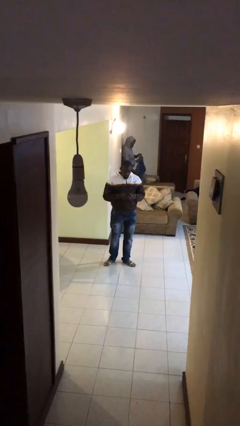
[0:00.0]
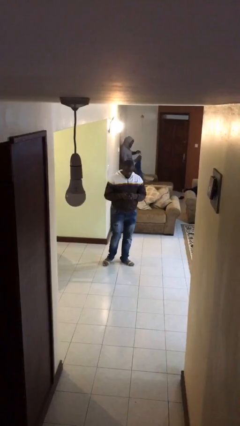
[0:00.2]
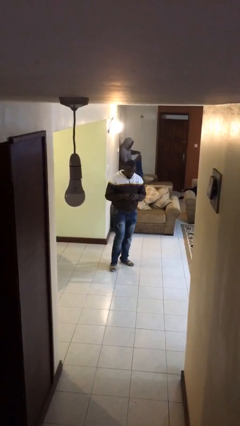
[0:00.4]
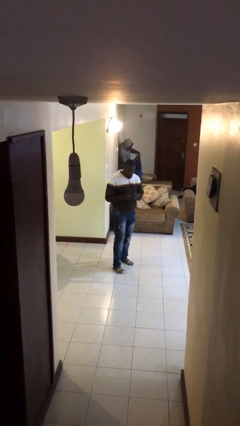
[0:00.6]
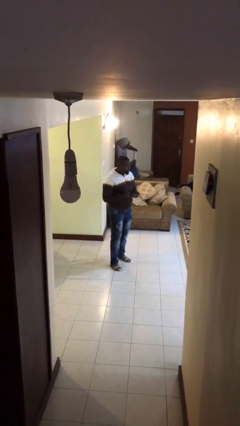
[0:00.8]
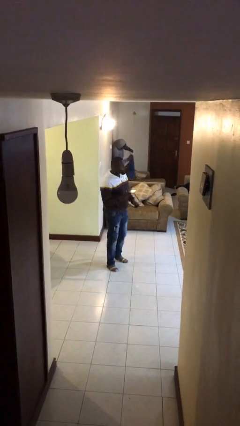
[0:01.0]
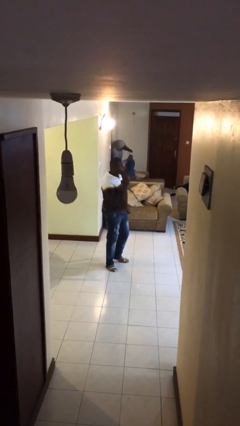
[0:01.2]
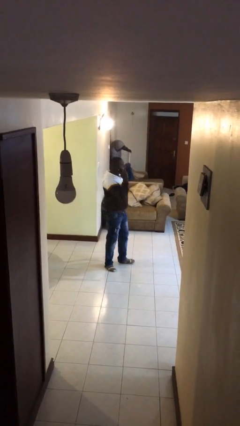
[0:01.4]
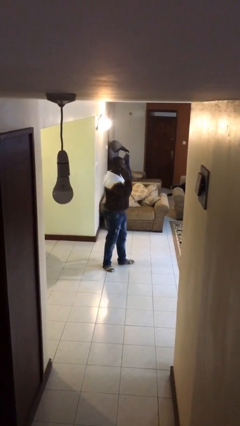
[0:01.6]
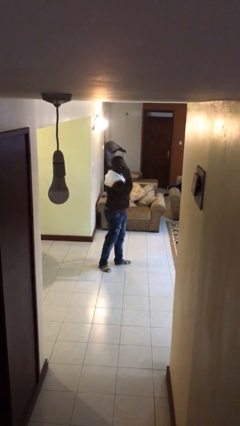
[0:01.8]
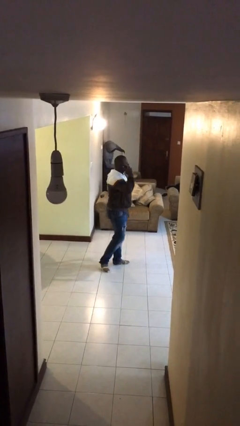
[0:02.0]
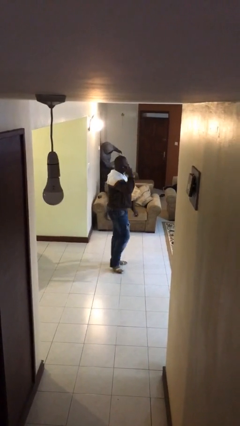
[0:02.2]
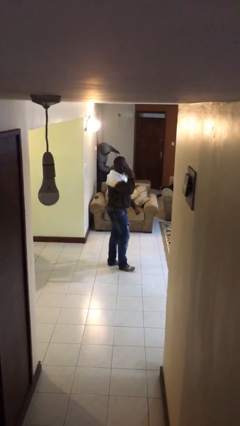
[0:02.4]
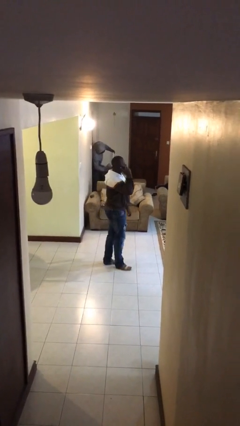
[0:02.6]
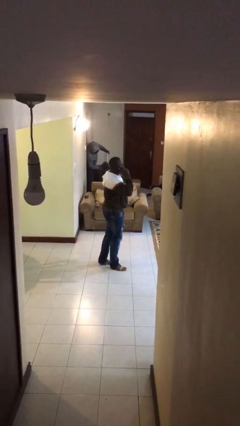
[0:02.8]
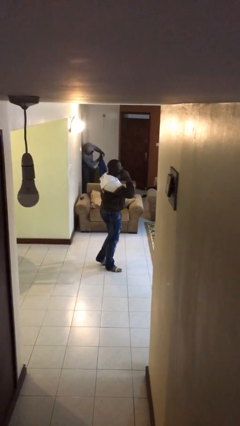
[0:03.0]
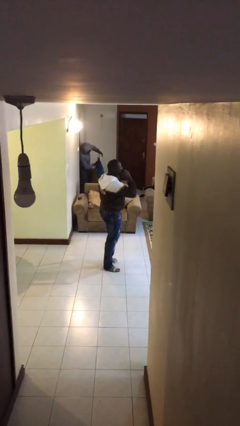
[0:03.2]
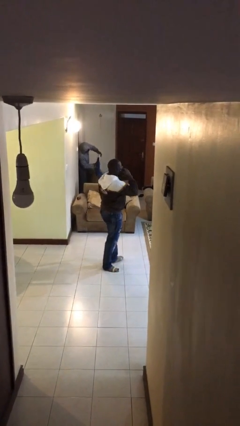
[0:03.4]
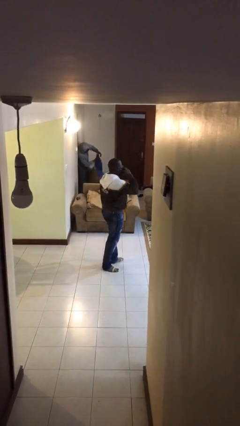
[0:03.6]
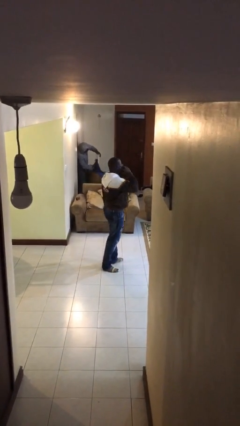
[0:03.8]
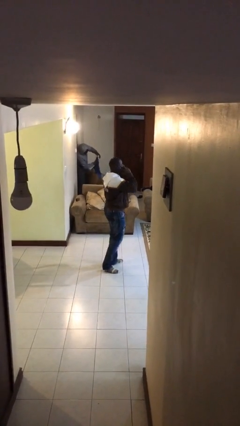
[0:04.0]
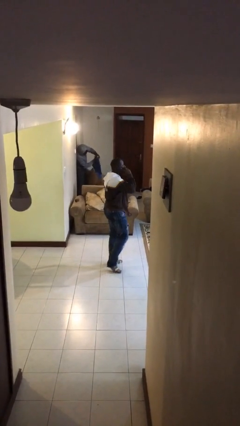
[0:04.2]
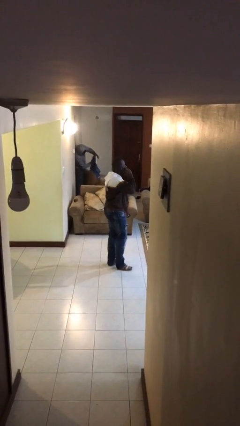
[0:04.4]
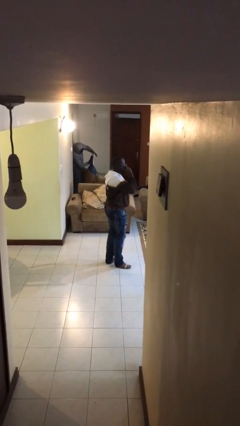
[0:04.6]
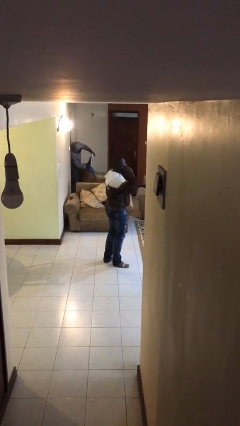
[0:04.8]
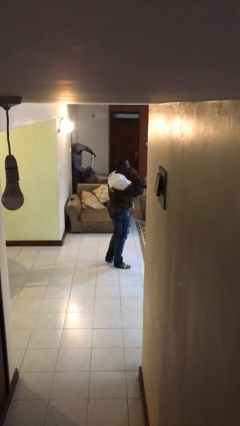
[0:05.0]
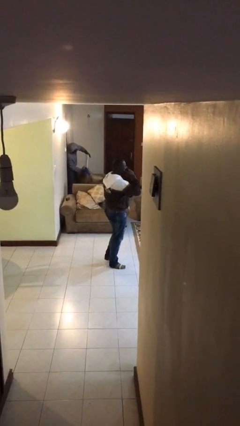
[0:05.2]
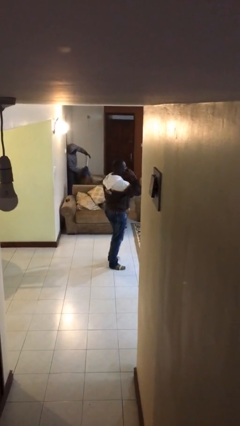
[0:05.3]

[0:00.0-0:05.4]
person talks on phone

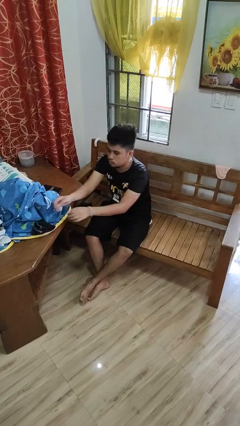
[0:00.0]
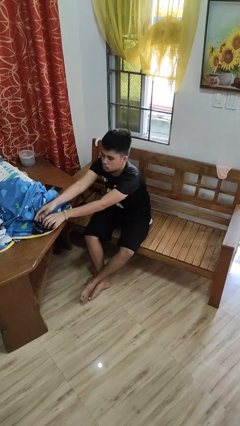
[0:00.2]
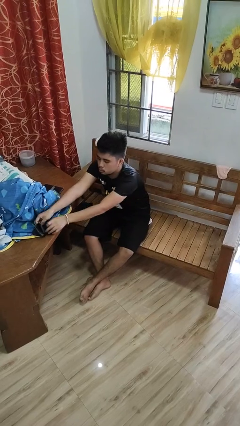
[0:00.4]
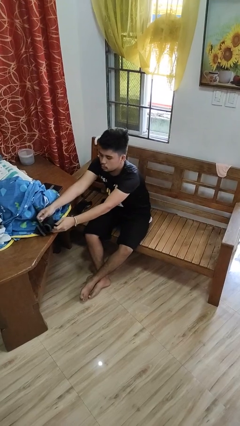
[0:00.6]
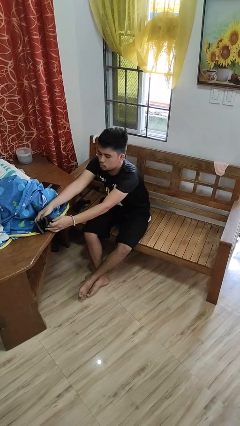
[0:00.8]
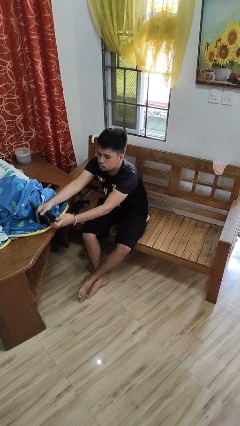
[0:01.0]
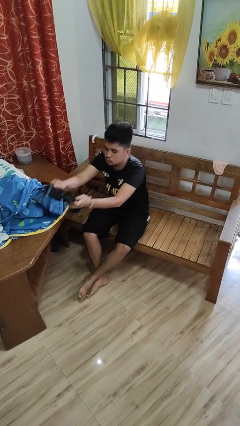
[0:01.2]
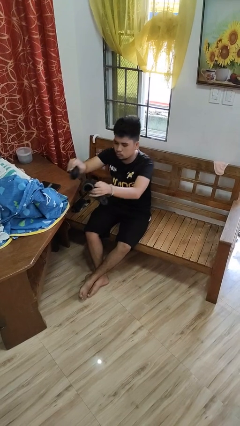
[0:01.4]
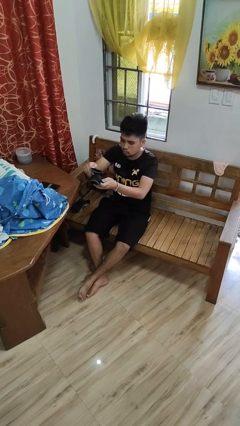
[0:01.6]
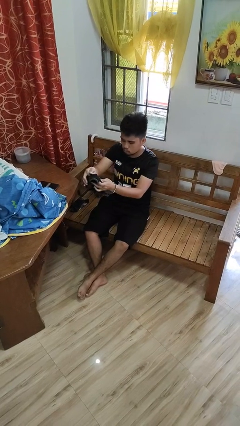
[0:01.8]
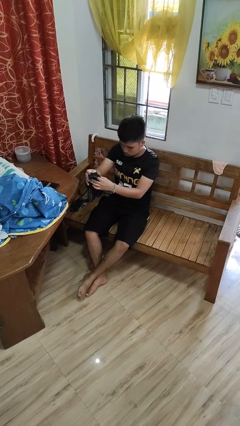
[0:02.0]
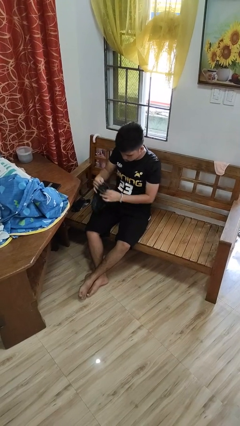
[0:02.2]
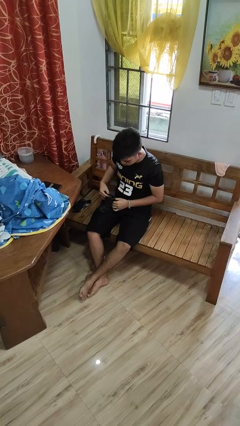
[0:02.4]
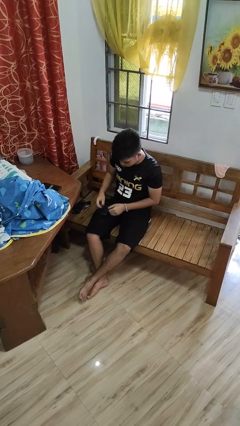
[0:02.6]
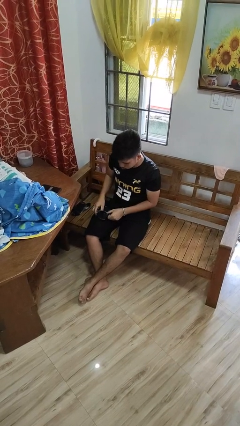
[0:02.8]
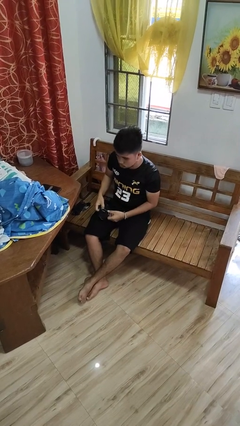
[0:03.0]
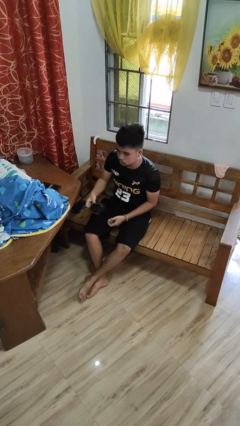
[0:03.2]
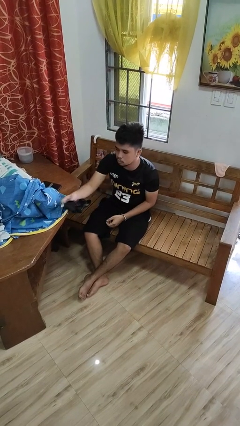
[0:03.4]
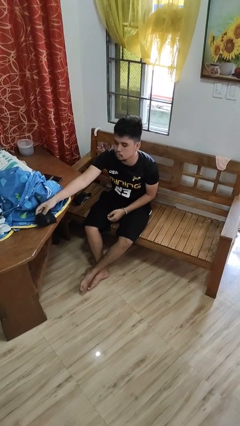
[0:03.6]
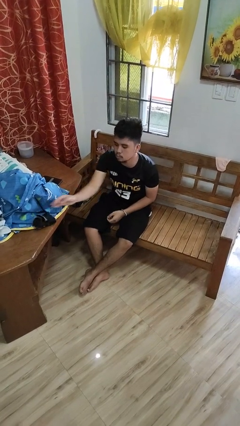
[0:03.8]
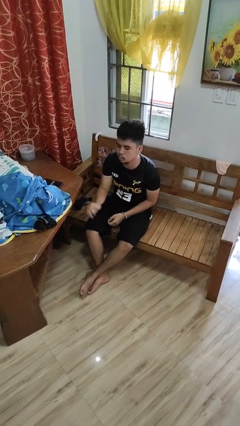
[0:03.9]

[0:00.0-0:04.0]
person folds socks

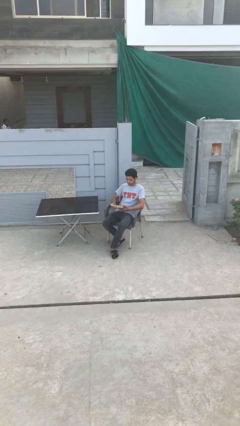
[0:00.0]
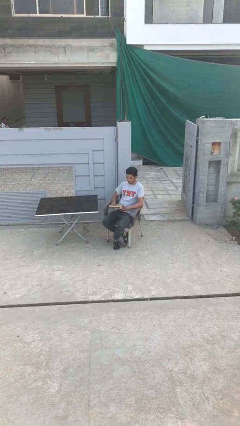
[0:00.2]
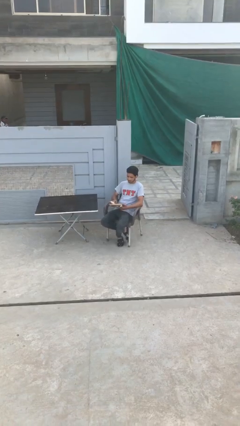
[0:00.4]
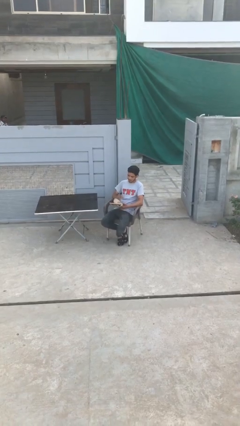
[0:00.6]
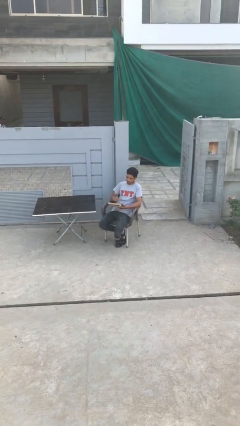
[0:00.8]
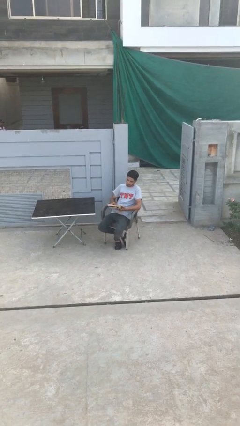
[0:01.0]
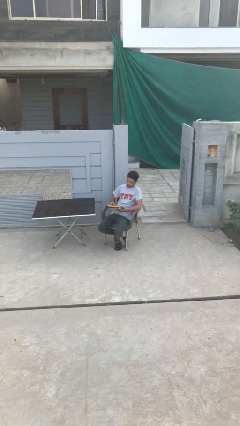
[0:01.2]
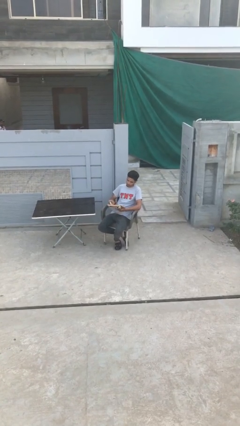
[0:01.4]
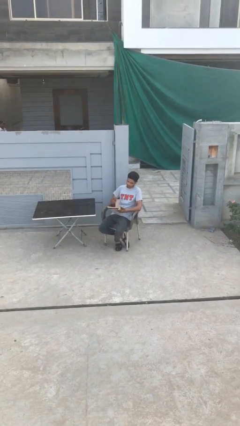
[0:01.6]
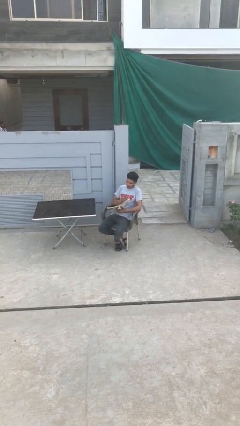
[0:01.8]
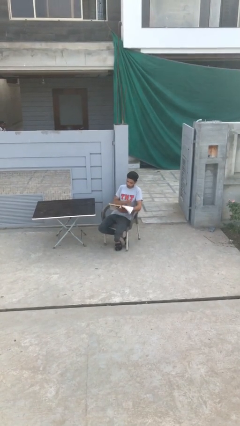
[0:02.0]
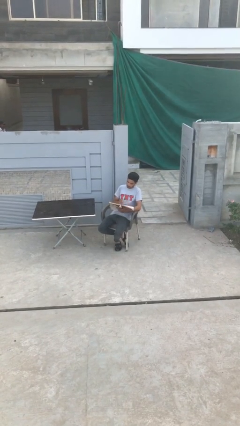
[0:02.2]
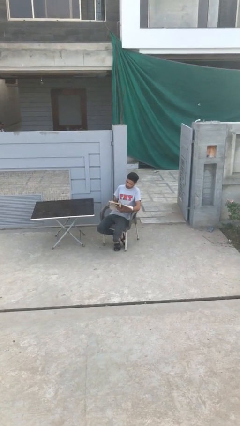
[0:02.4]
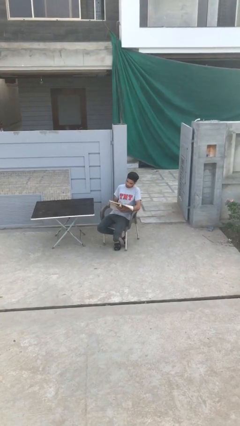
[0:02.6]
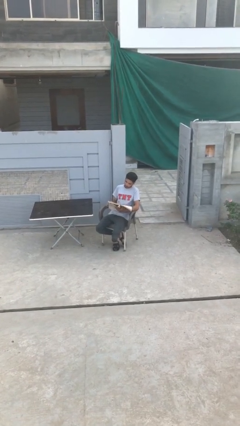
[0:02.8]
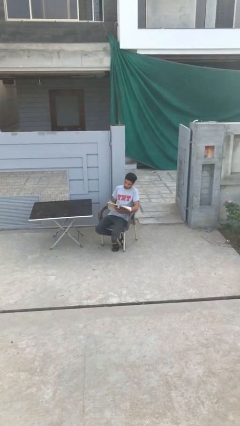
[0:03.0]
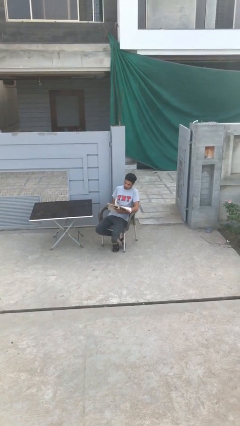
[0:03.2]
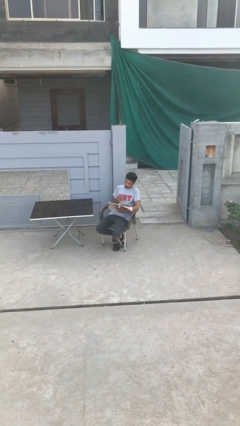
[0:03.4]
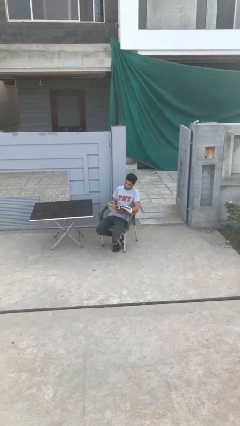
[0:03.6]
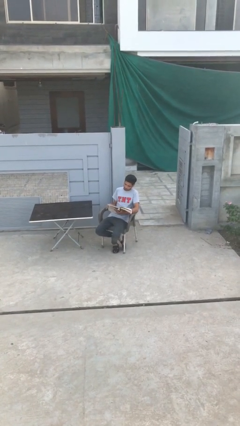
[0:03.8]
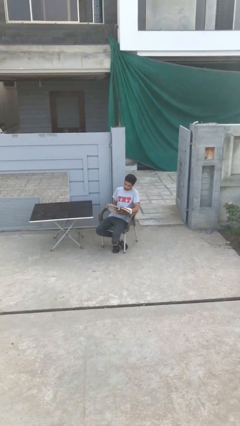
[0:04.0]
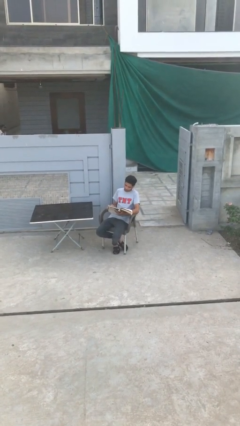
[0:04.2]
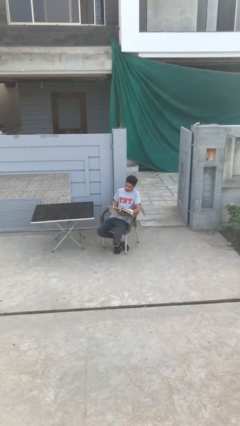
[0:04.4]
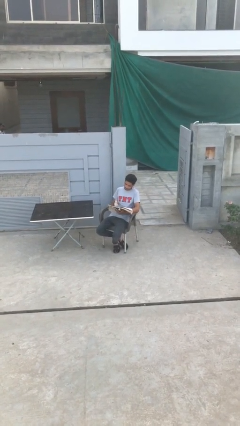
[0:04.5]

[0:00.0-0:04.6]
person reads document

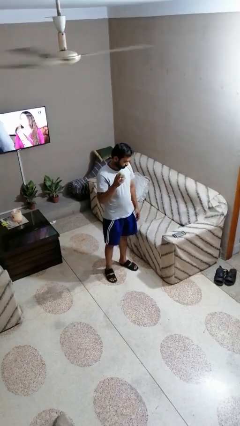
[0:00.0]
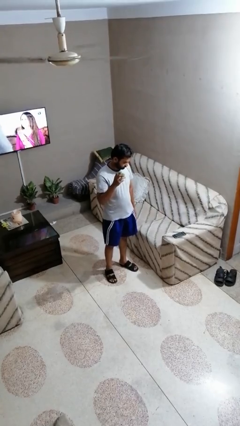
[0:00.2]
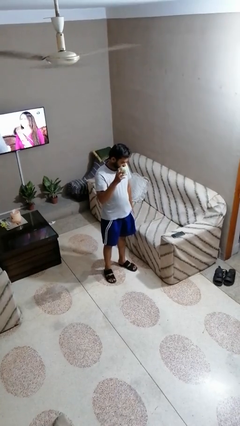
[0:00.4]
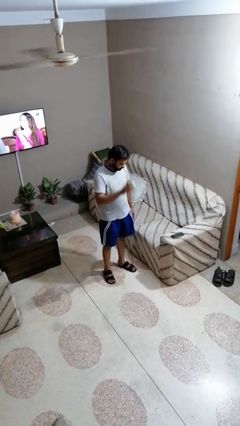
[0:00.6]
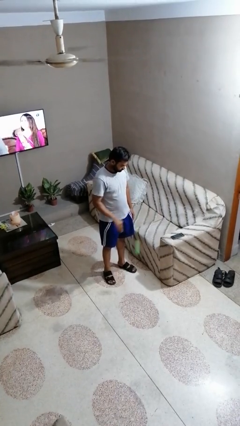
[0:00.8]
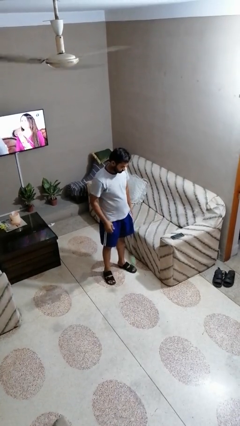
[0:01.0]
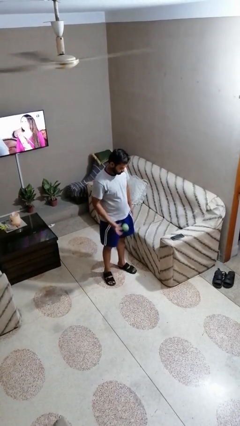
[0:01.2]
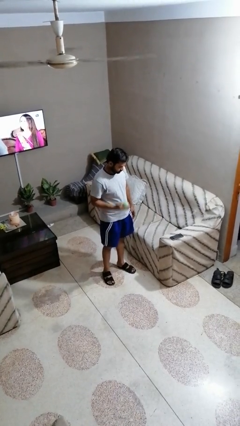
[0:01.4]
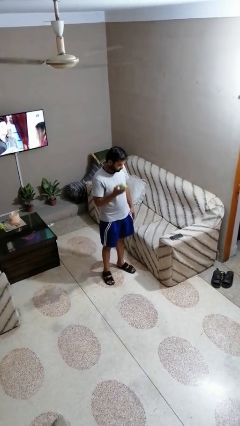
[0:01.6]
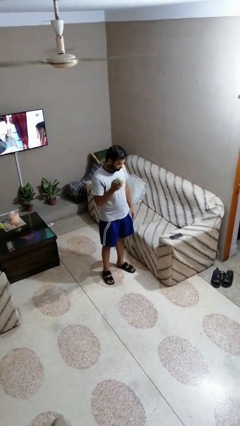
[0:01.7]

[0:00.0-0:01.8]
person bounces ball on floor

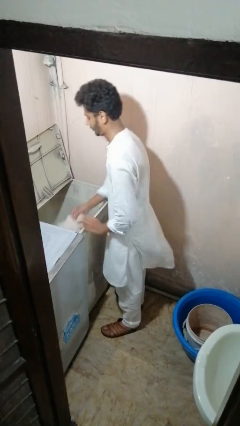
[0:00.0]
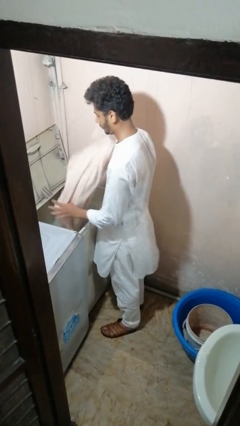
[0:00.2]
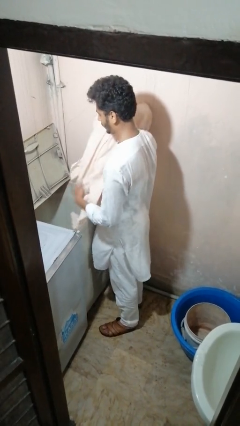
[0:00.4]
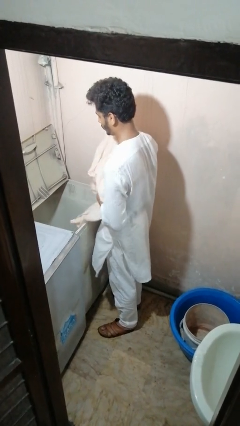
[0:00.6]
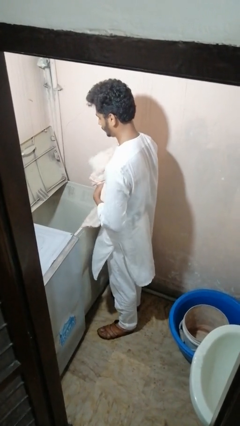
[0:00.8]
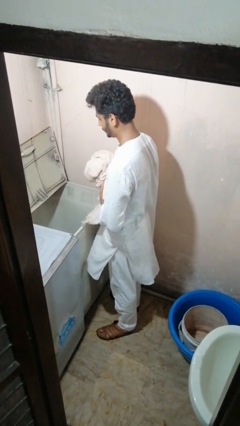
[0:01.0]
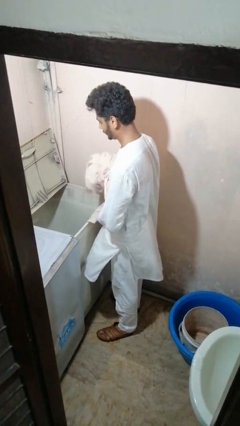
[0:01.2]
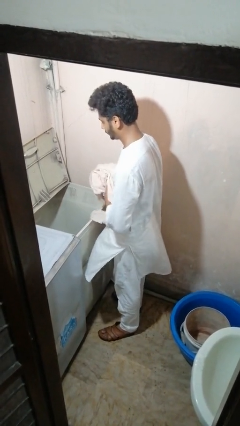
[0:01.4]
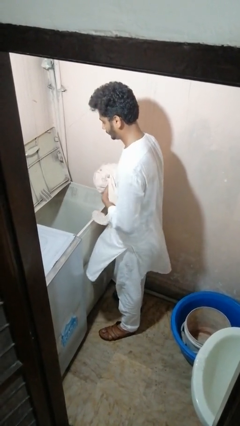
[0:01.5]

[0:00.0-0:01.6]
person unloads clotheswasher
